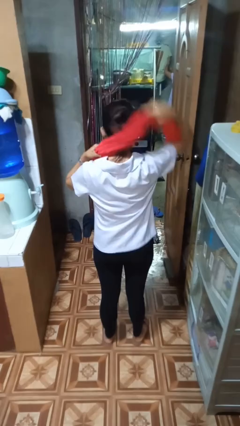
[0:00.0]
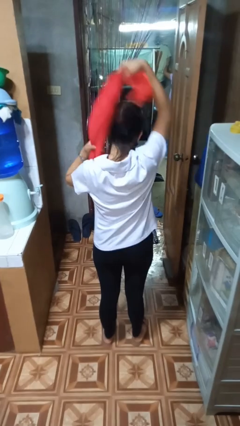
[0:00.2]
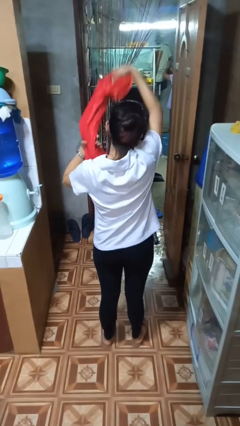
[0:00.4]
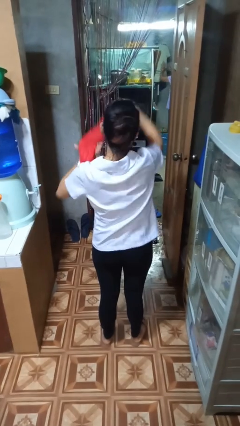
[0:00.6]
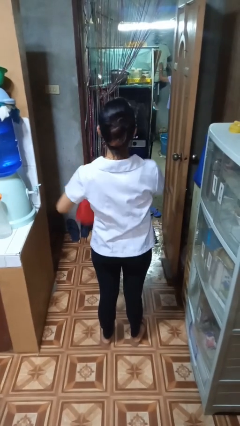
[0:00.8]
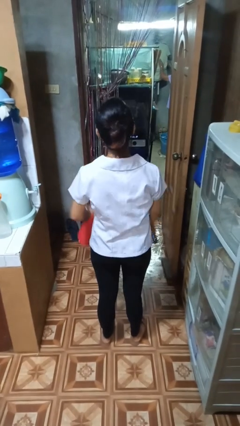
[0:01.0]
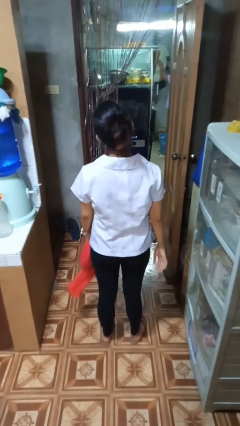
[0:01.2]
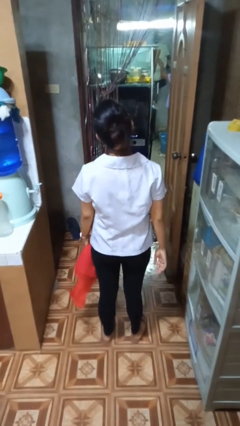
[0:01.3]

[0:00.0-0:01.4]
person takes off scarf

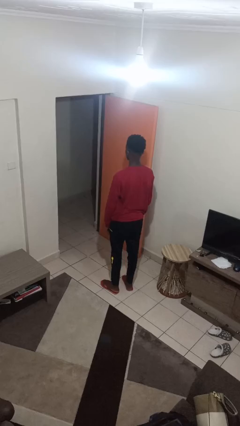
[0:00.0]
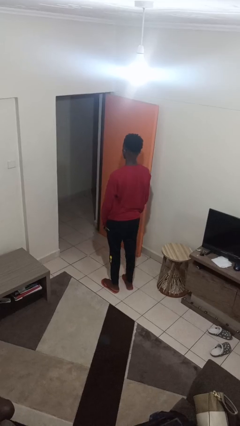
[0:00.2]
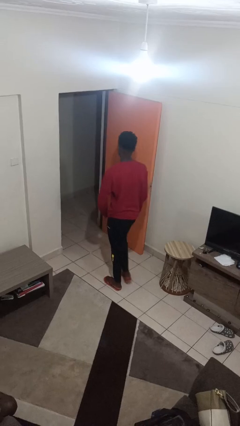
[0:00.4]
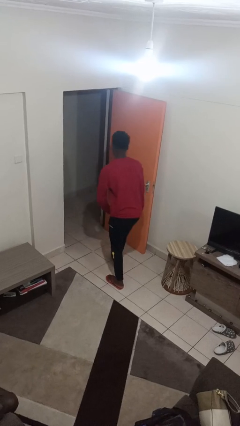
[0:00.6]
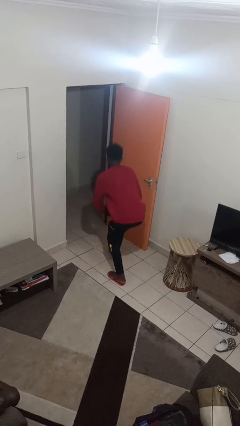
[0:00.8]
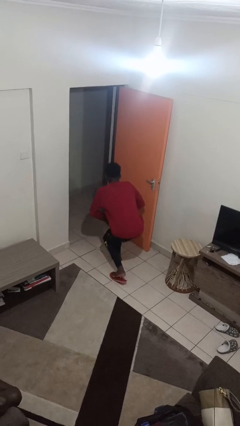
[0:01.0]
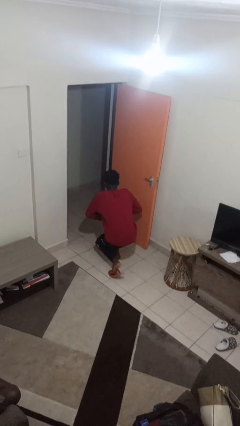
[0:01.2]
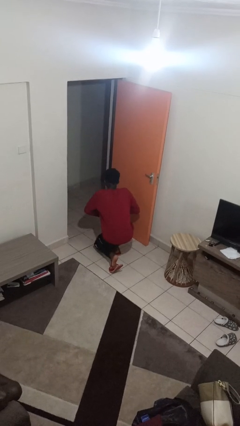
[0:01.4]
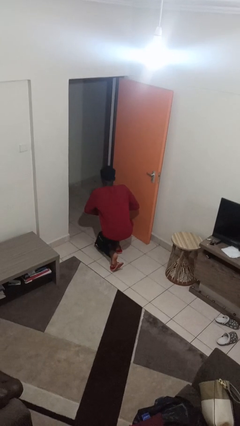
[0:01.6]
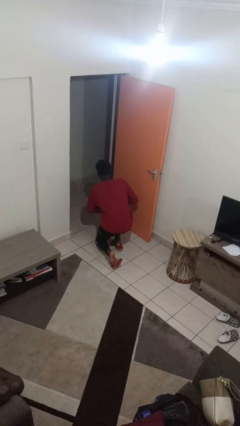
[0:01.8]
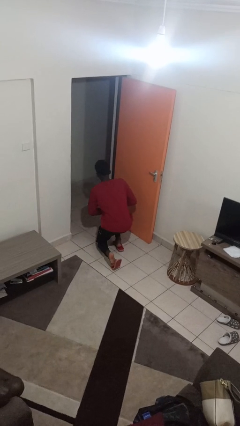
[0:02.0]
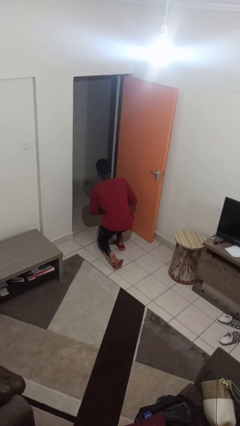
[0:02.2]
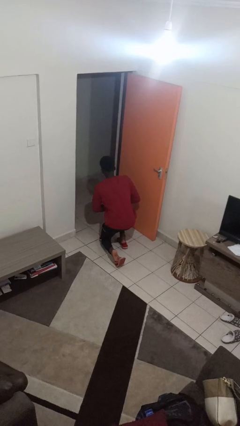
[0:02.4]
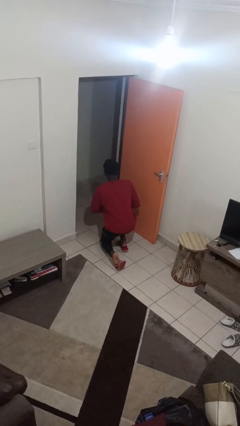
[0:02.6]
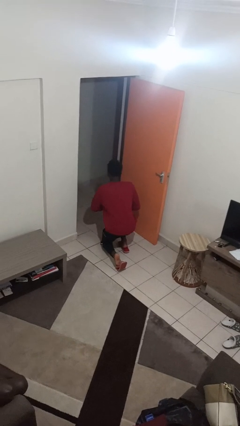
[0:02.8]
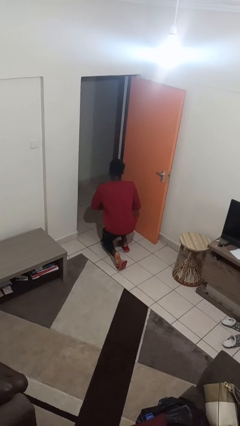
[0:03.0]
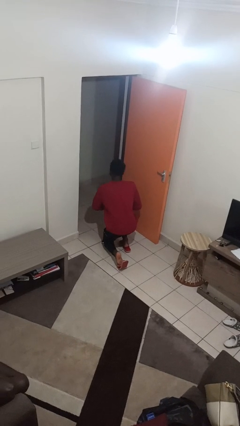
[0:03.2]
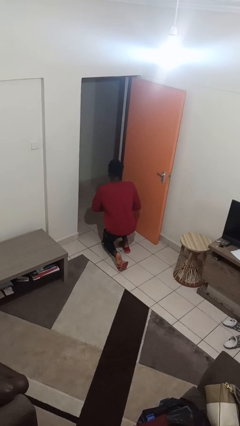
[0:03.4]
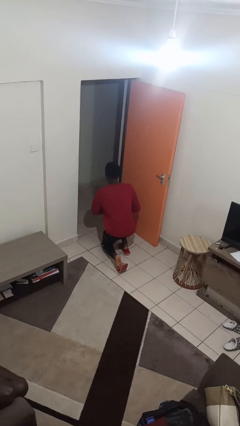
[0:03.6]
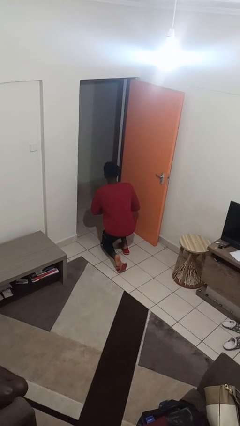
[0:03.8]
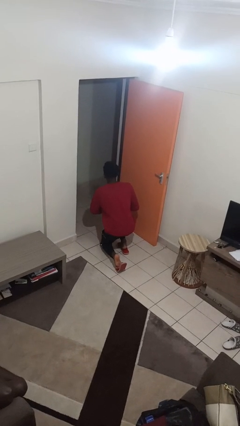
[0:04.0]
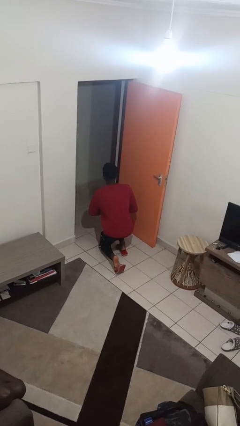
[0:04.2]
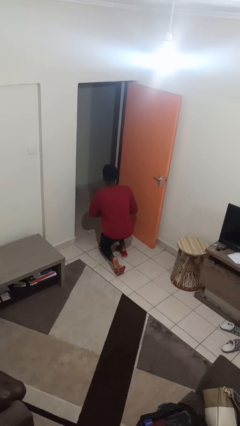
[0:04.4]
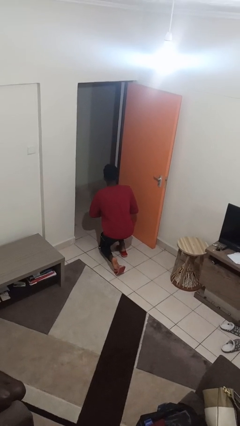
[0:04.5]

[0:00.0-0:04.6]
person kneels

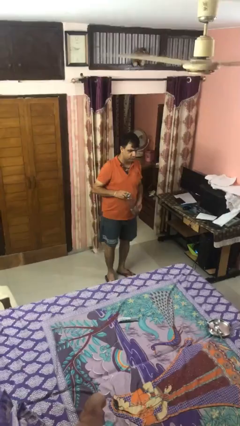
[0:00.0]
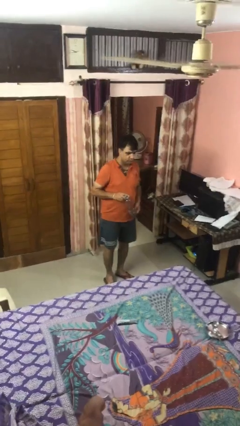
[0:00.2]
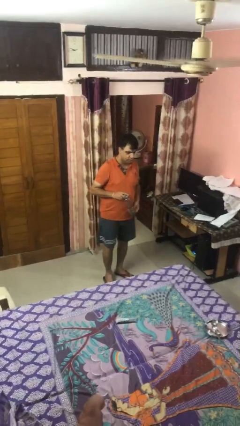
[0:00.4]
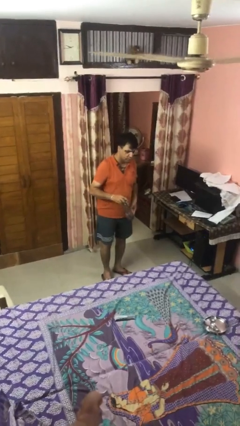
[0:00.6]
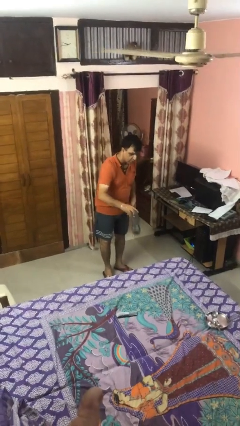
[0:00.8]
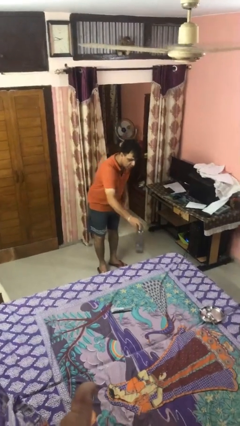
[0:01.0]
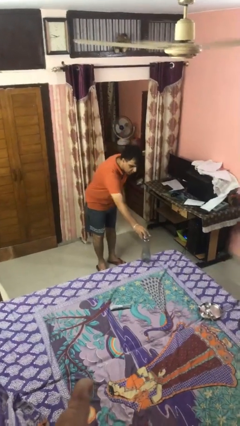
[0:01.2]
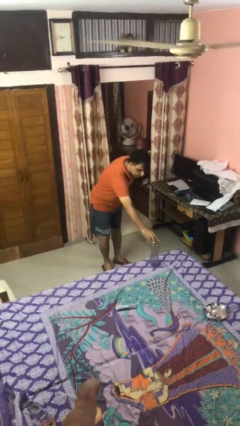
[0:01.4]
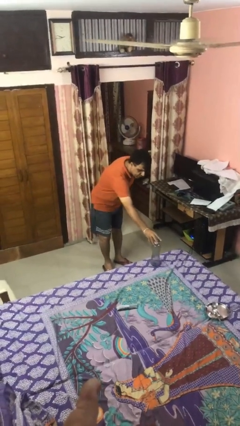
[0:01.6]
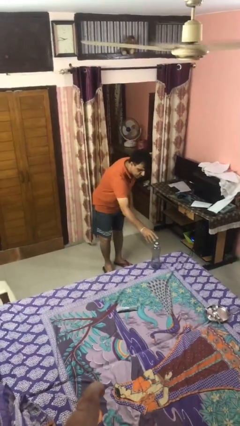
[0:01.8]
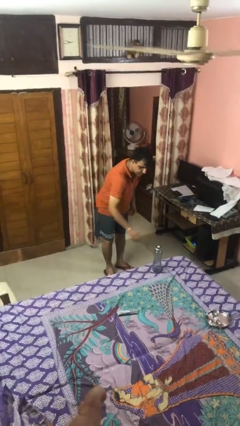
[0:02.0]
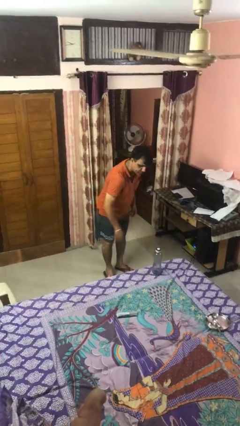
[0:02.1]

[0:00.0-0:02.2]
person puts down object on bed

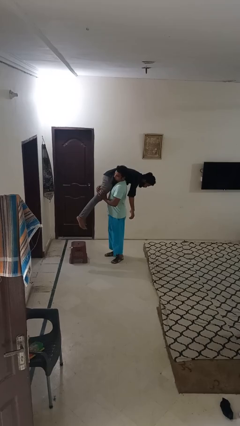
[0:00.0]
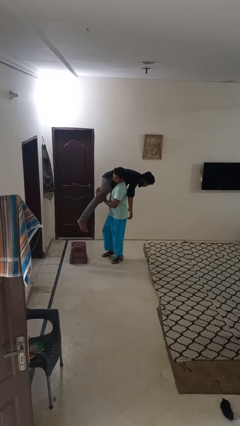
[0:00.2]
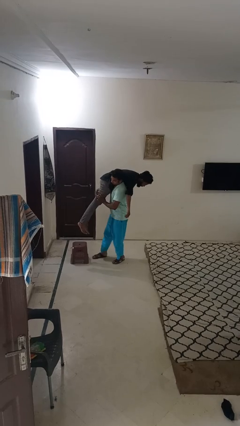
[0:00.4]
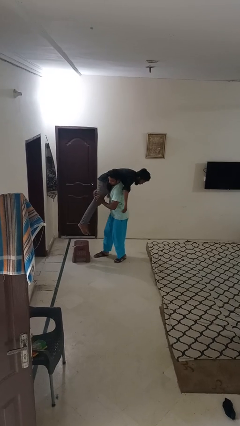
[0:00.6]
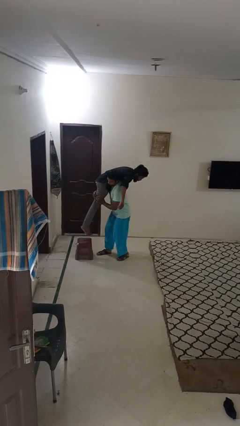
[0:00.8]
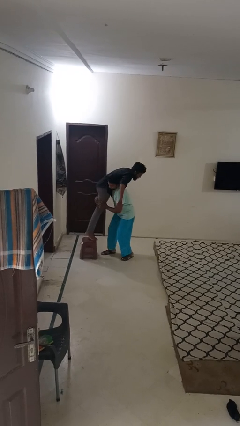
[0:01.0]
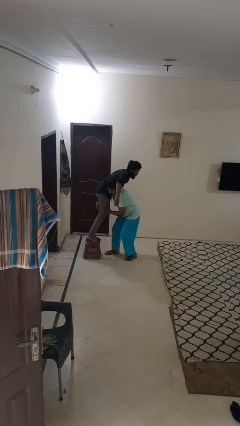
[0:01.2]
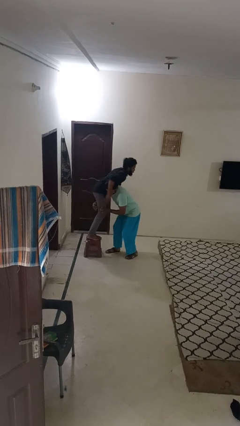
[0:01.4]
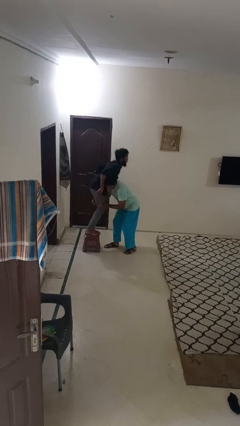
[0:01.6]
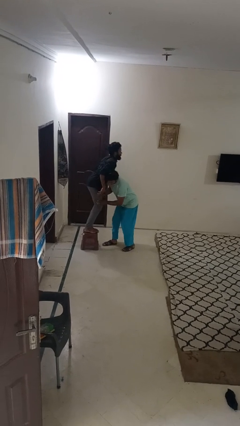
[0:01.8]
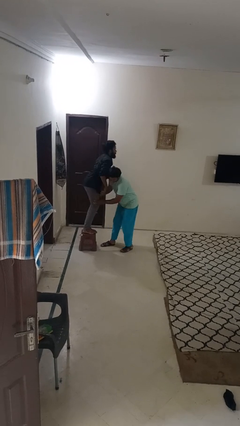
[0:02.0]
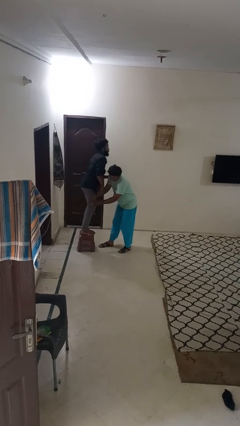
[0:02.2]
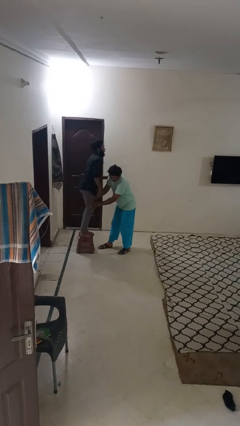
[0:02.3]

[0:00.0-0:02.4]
person puts down person

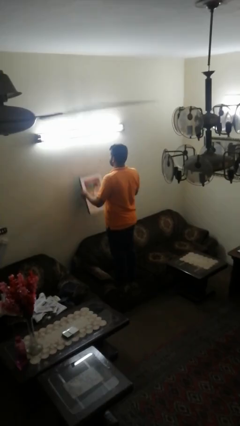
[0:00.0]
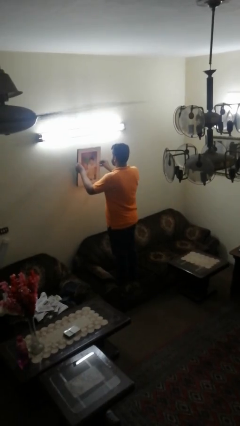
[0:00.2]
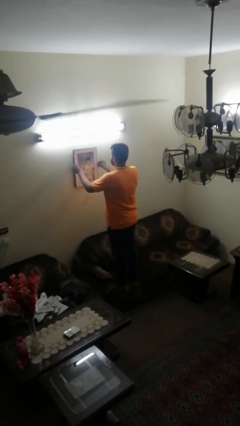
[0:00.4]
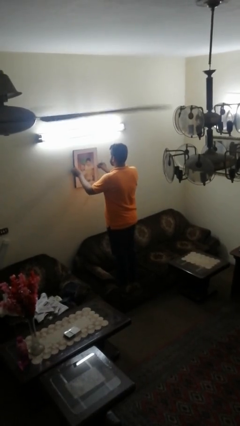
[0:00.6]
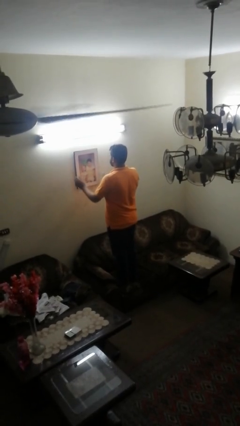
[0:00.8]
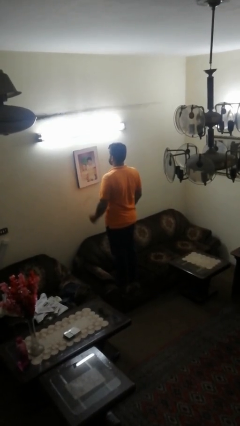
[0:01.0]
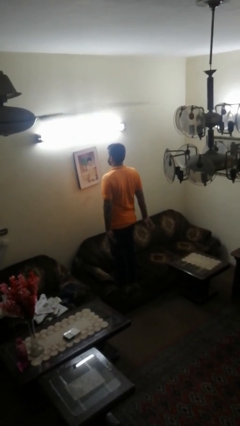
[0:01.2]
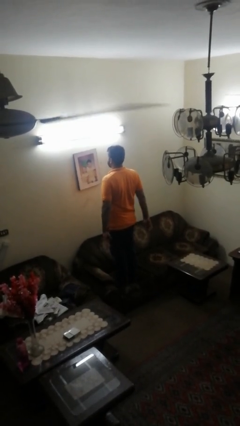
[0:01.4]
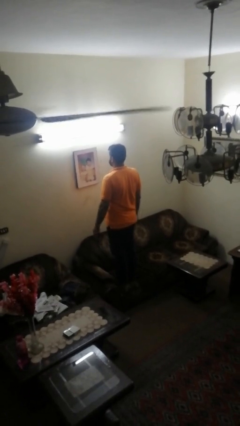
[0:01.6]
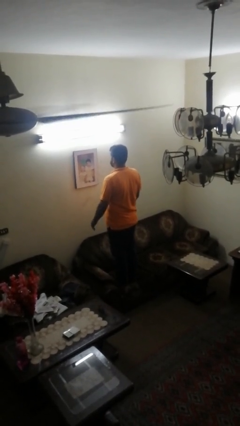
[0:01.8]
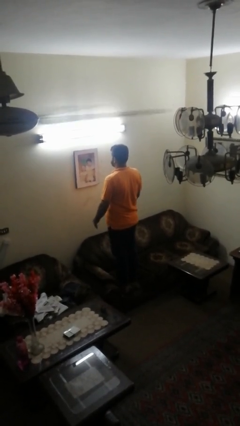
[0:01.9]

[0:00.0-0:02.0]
person puts up picture frame

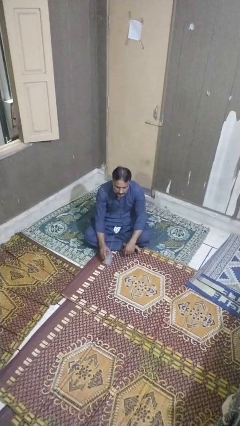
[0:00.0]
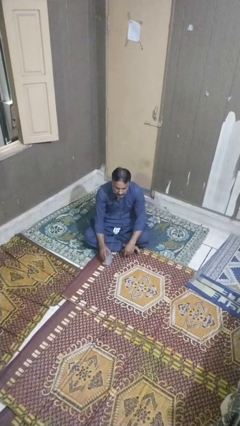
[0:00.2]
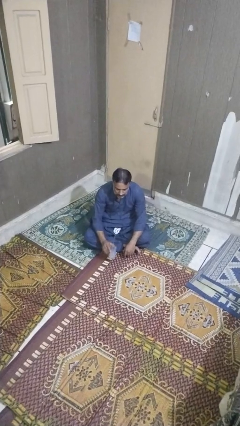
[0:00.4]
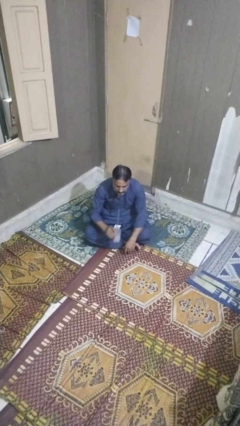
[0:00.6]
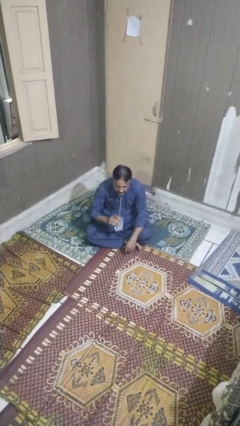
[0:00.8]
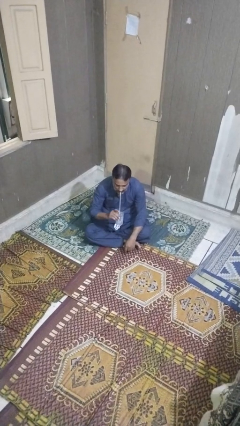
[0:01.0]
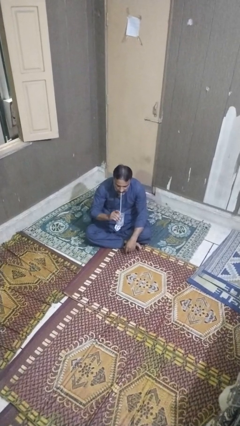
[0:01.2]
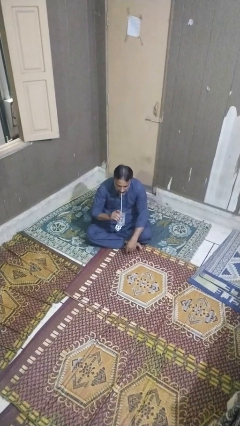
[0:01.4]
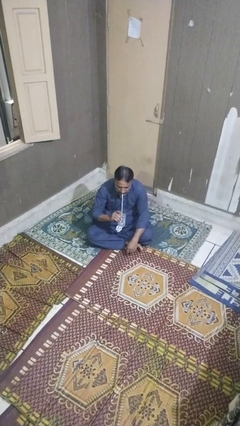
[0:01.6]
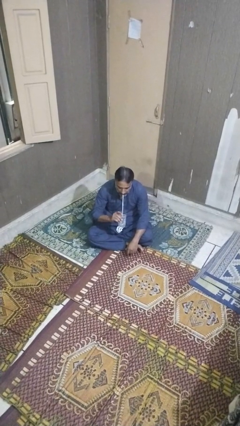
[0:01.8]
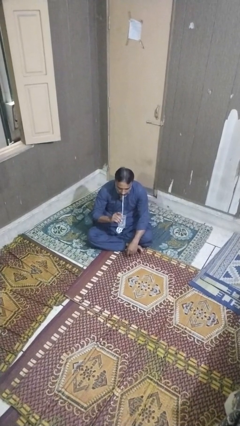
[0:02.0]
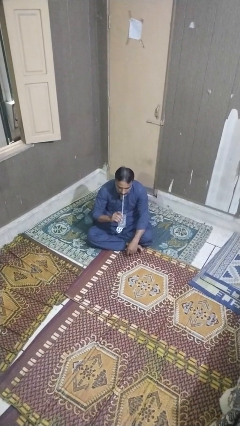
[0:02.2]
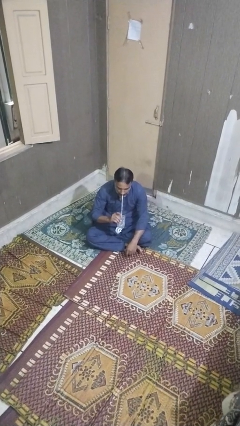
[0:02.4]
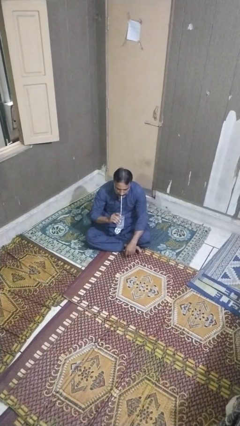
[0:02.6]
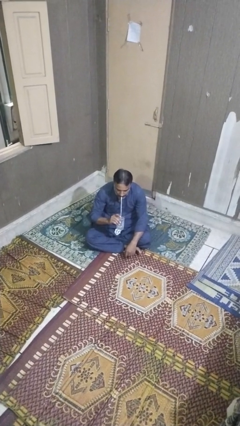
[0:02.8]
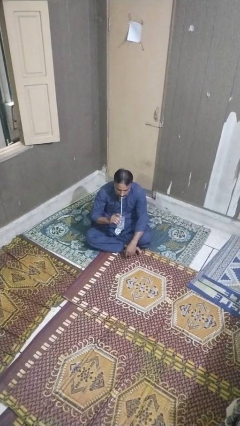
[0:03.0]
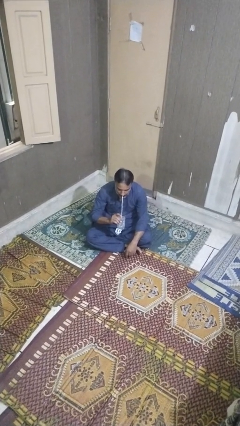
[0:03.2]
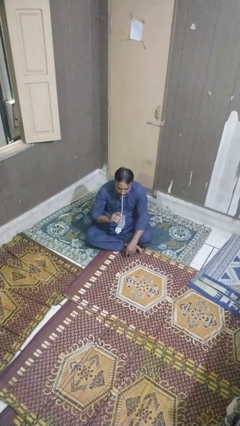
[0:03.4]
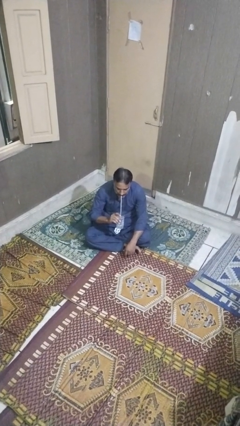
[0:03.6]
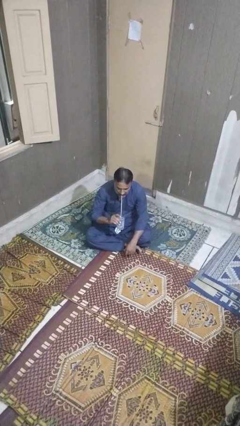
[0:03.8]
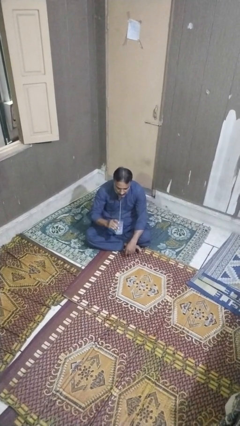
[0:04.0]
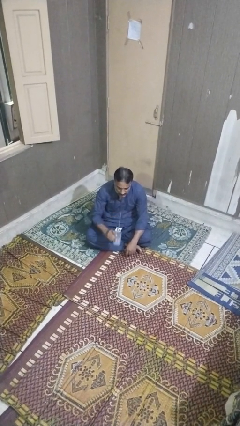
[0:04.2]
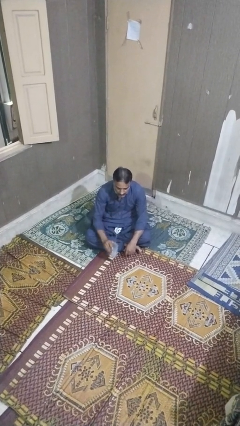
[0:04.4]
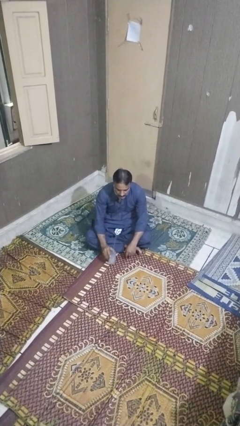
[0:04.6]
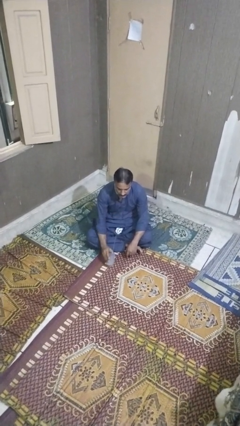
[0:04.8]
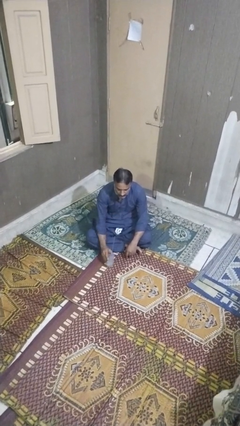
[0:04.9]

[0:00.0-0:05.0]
person drinks from straw
